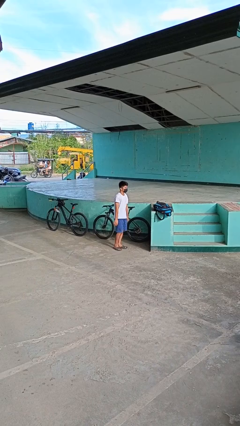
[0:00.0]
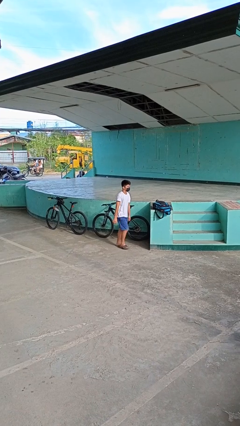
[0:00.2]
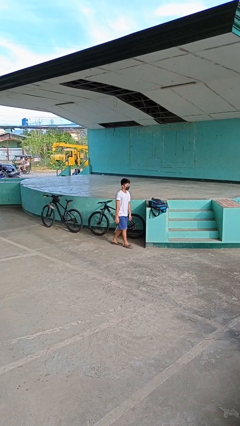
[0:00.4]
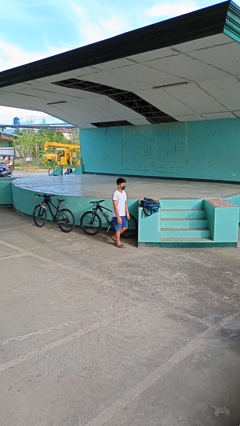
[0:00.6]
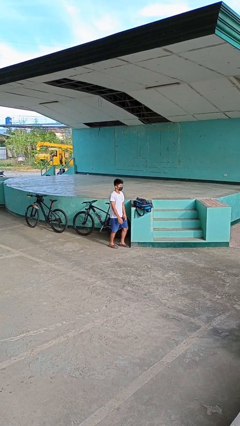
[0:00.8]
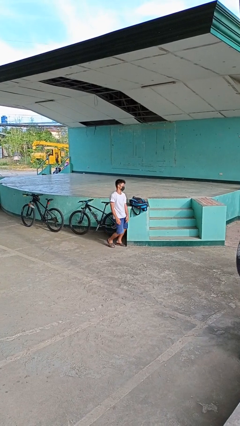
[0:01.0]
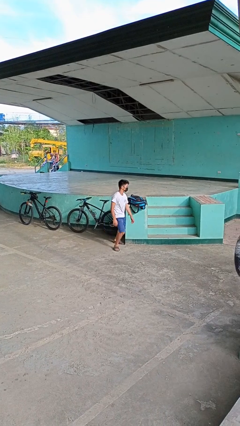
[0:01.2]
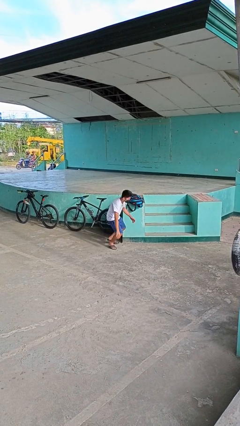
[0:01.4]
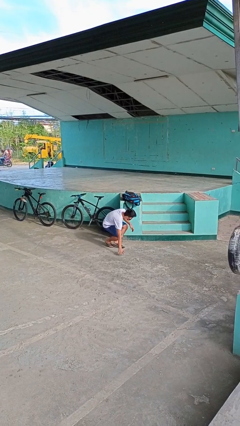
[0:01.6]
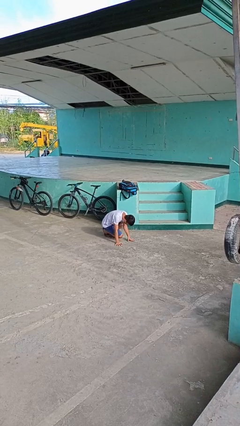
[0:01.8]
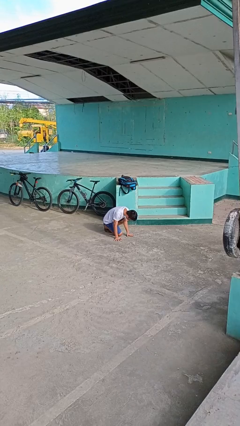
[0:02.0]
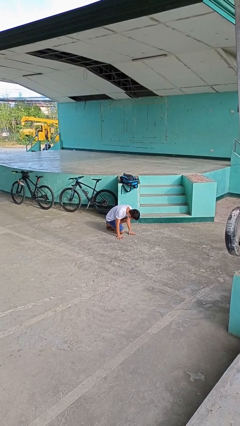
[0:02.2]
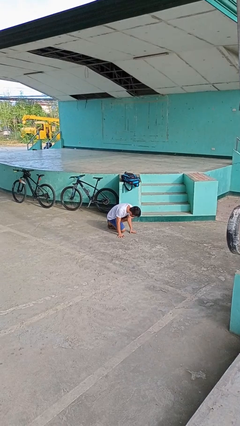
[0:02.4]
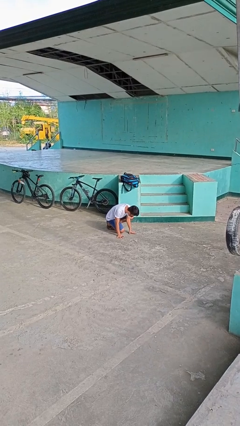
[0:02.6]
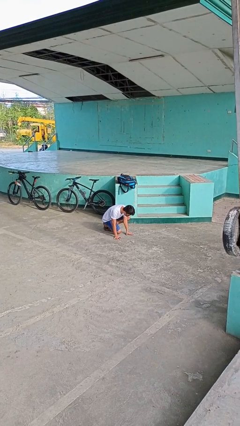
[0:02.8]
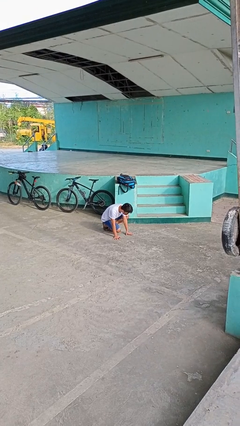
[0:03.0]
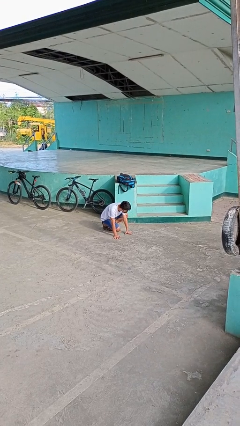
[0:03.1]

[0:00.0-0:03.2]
person trips on object on floor

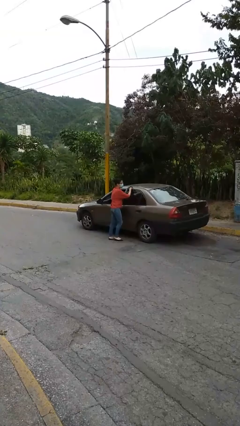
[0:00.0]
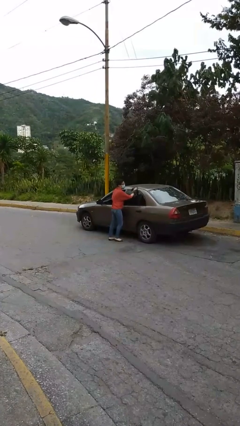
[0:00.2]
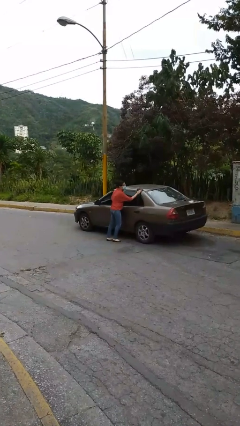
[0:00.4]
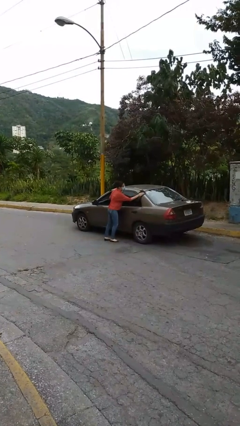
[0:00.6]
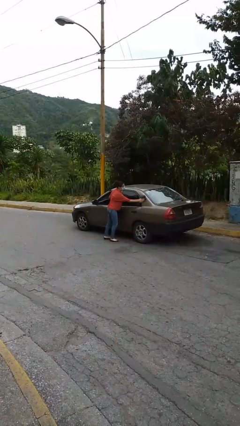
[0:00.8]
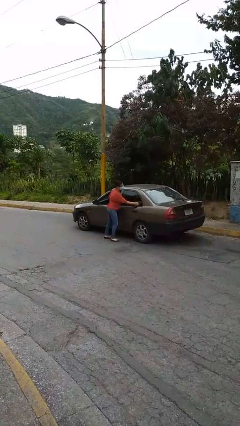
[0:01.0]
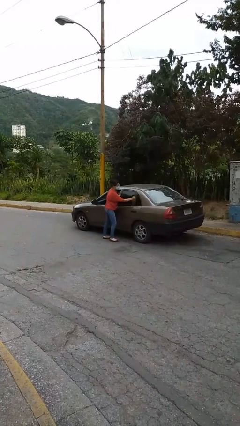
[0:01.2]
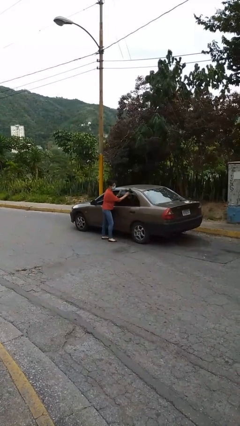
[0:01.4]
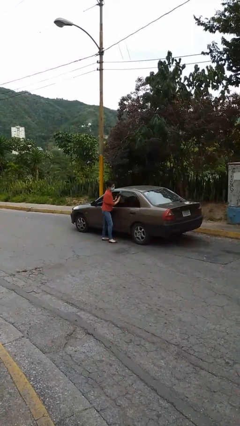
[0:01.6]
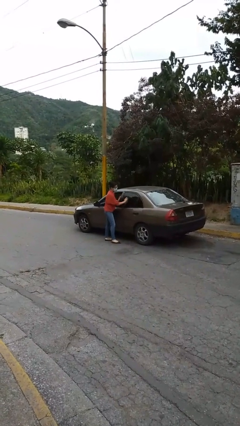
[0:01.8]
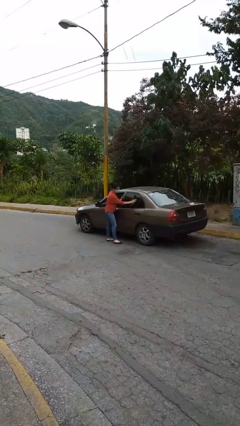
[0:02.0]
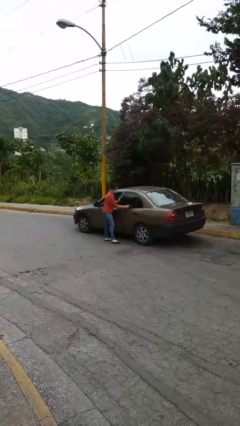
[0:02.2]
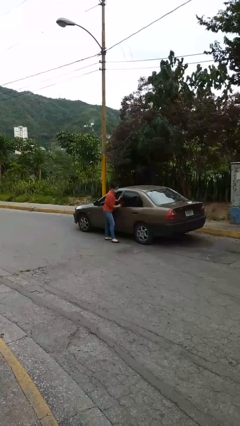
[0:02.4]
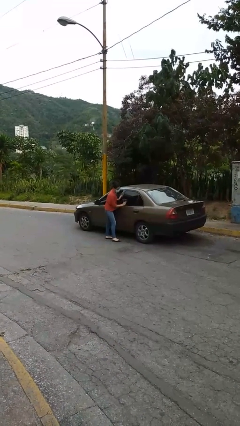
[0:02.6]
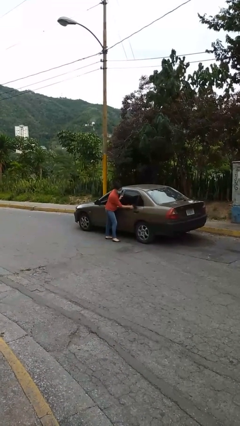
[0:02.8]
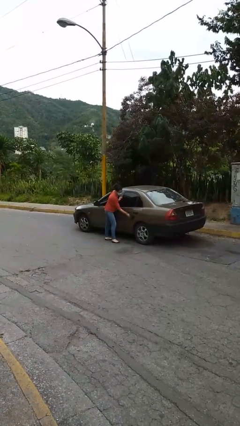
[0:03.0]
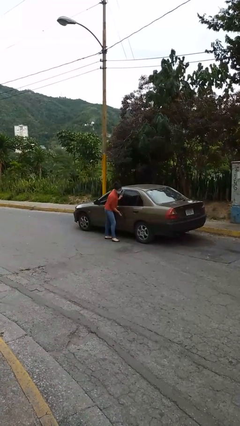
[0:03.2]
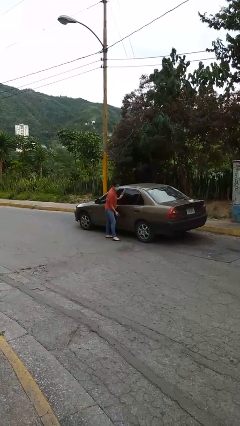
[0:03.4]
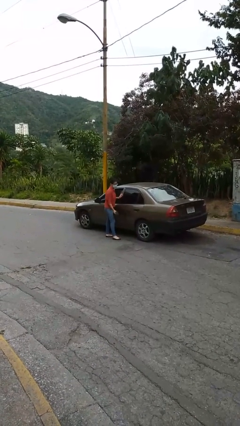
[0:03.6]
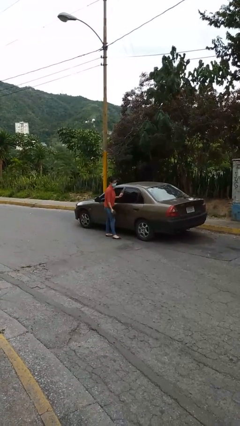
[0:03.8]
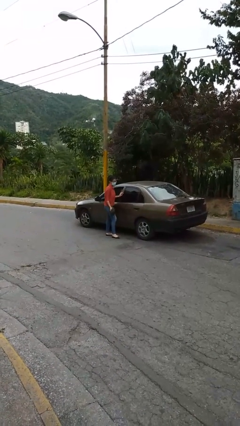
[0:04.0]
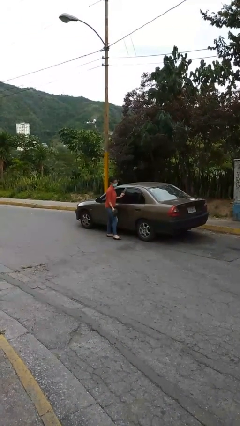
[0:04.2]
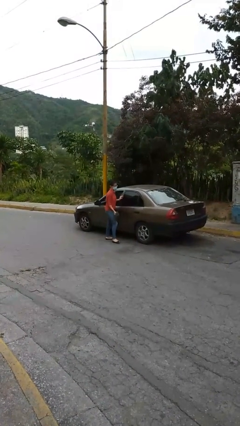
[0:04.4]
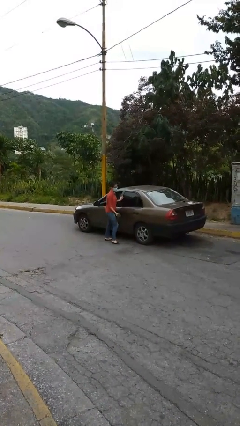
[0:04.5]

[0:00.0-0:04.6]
person polishes car with rag

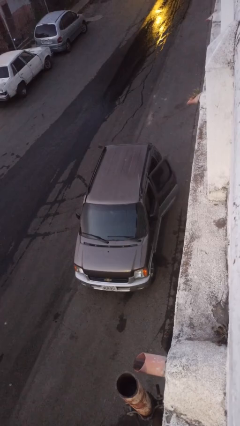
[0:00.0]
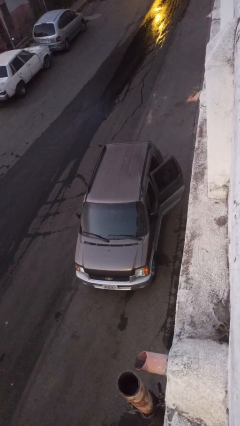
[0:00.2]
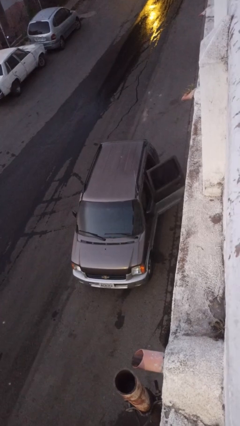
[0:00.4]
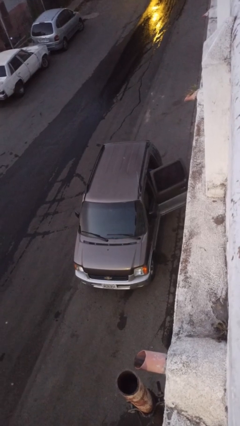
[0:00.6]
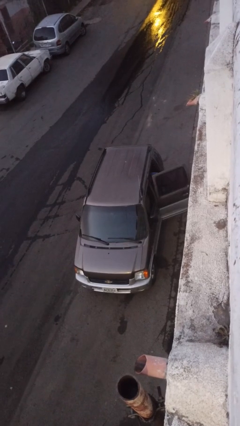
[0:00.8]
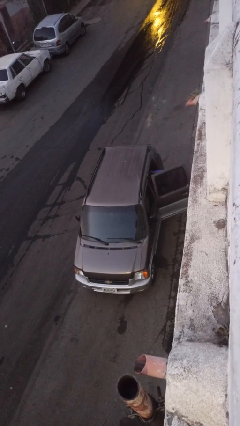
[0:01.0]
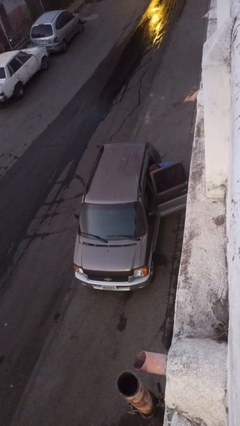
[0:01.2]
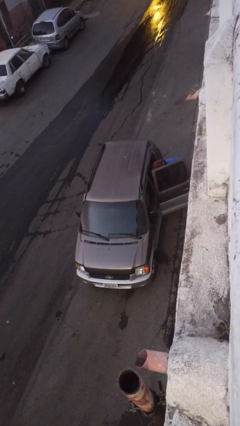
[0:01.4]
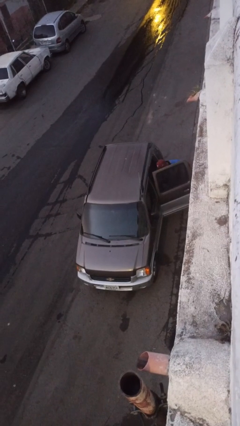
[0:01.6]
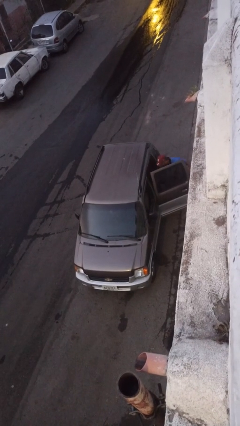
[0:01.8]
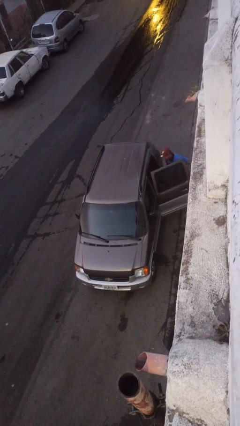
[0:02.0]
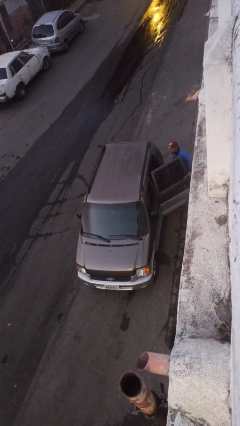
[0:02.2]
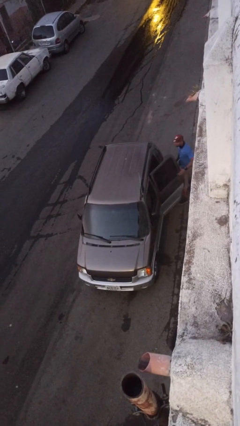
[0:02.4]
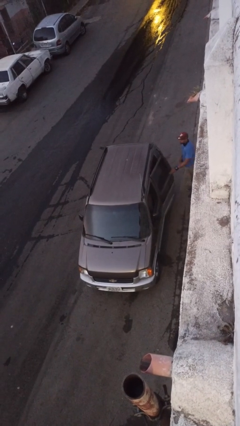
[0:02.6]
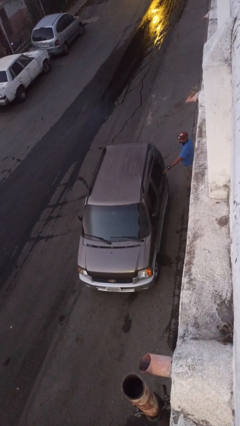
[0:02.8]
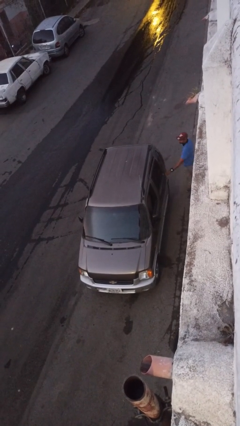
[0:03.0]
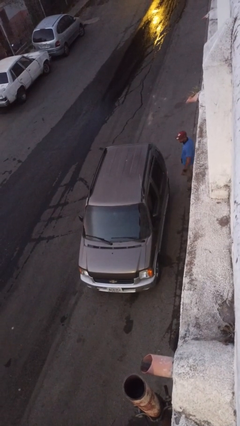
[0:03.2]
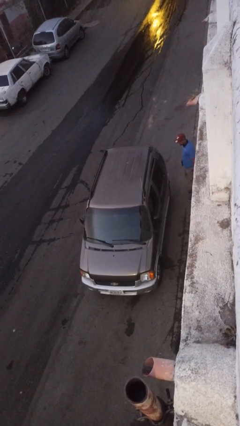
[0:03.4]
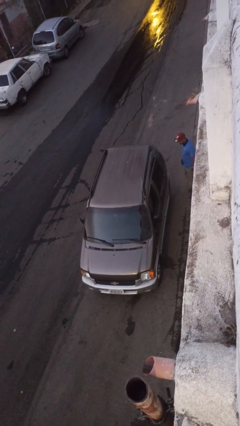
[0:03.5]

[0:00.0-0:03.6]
car drops off person

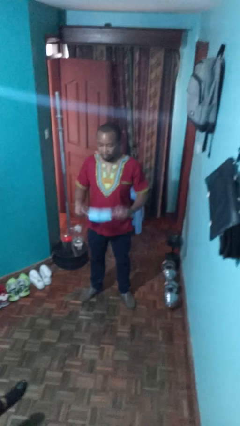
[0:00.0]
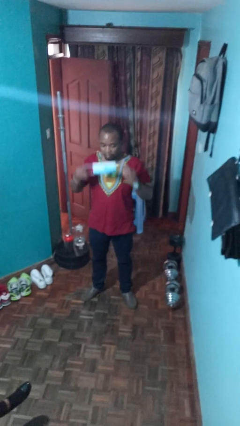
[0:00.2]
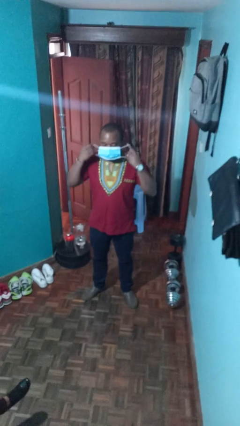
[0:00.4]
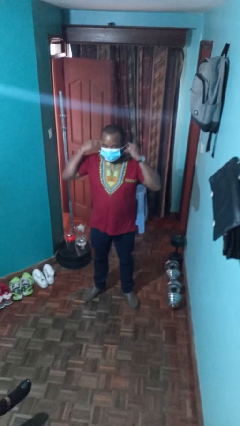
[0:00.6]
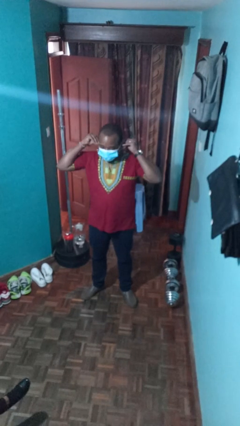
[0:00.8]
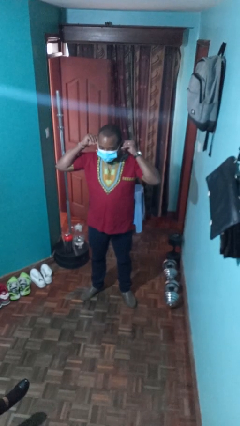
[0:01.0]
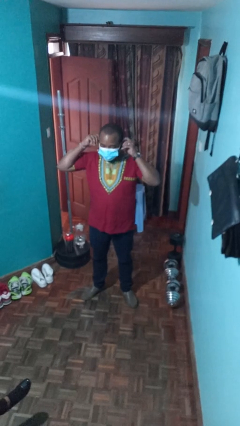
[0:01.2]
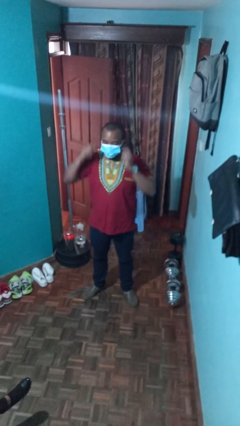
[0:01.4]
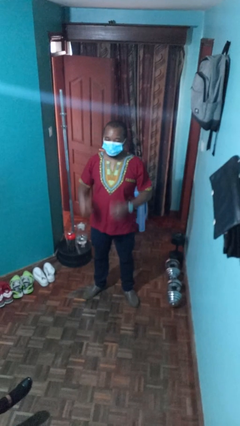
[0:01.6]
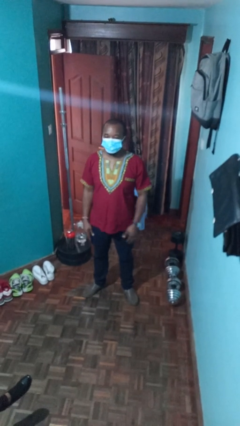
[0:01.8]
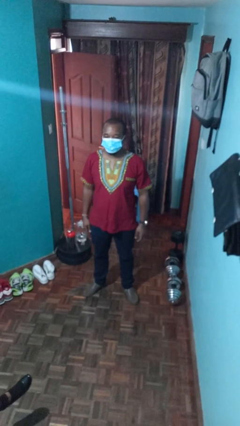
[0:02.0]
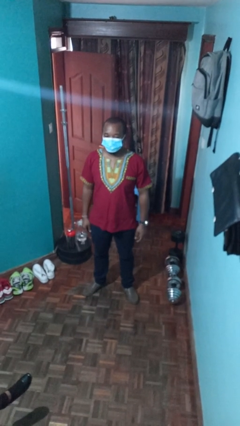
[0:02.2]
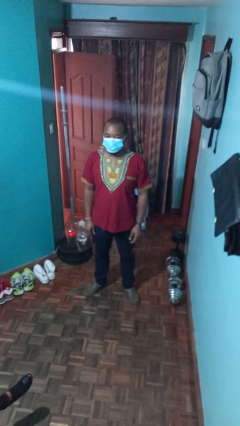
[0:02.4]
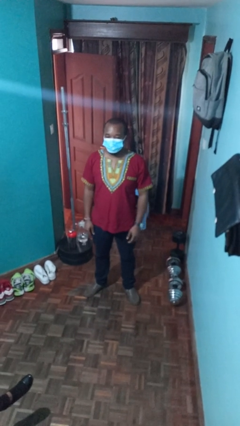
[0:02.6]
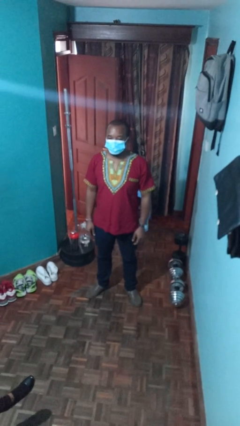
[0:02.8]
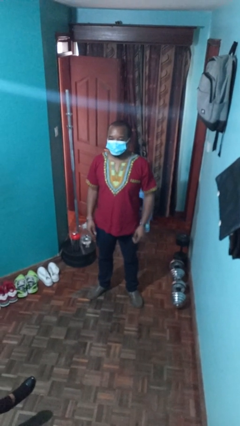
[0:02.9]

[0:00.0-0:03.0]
person puts on facemask

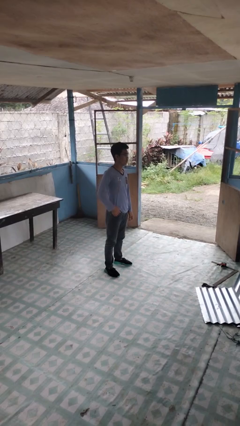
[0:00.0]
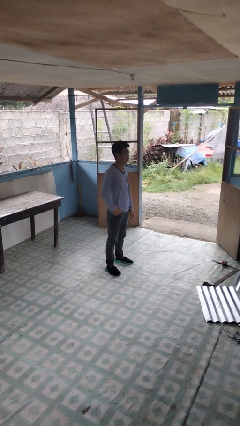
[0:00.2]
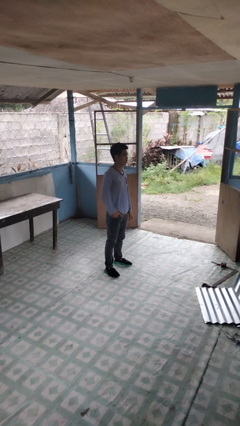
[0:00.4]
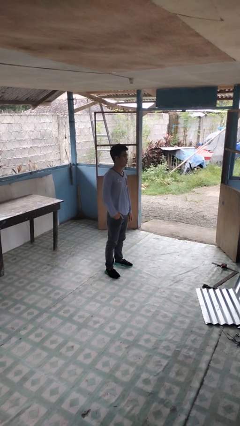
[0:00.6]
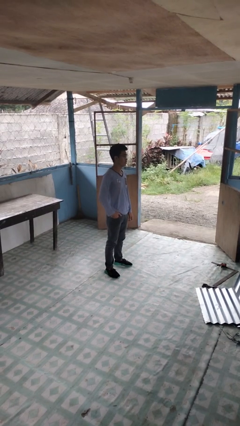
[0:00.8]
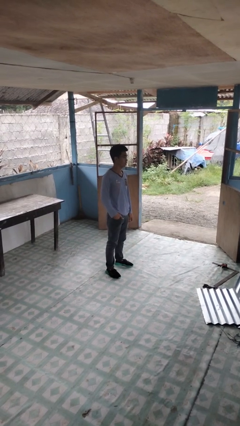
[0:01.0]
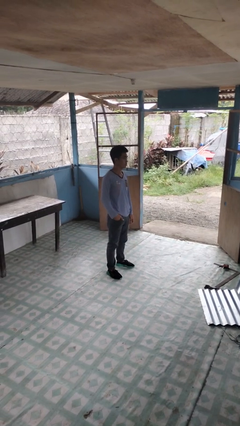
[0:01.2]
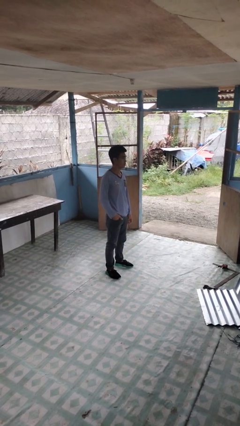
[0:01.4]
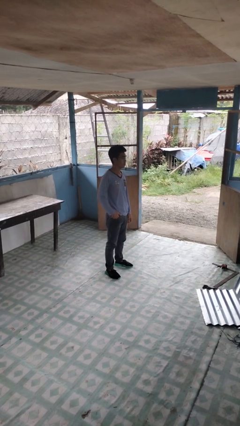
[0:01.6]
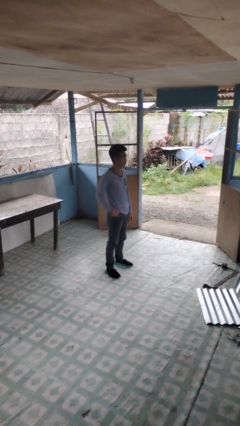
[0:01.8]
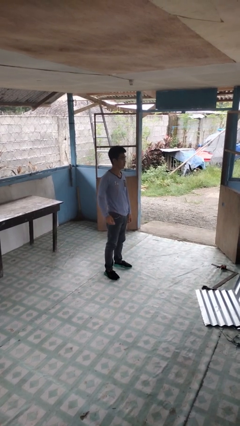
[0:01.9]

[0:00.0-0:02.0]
person puts hands in back pockets

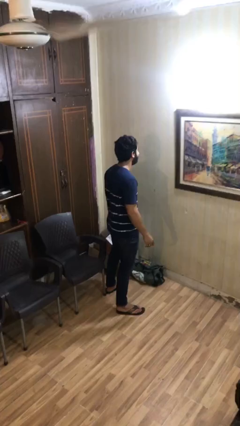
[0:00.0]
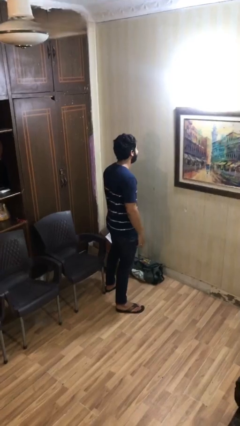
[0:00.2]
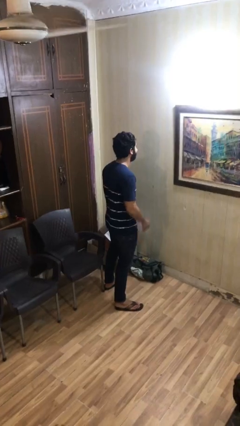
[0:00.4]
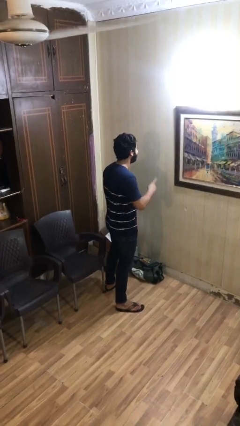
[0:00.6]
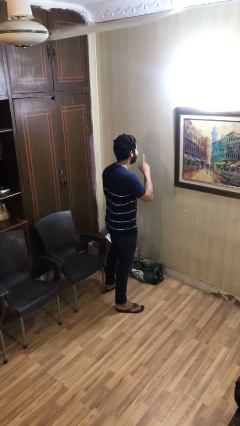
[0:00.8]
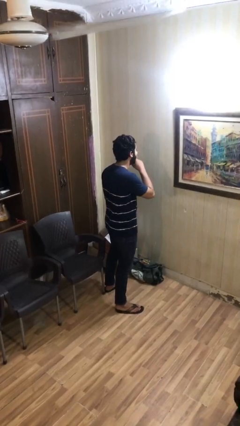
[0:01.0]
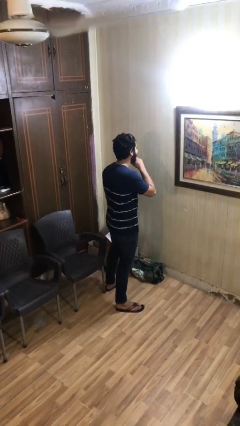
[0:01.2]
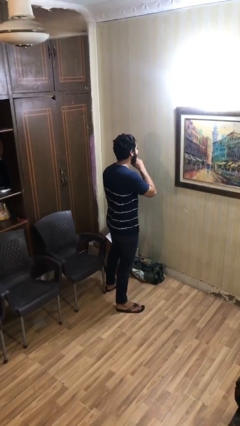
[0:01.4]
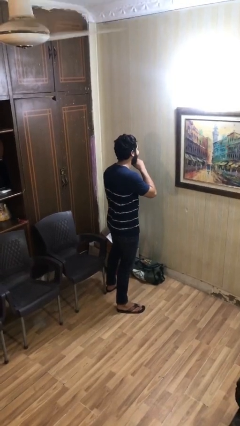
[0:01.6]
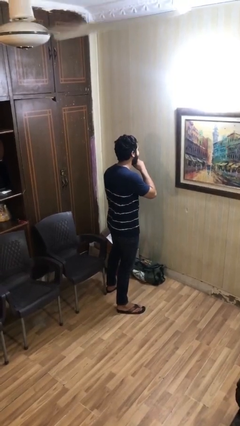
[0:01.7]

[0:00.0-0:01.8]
person gestures be quiet
